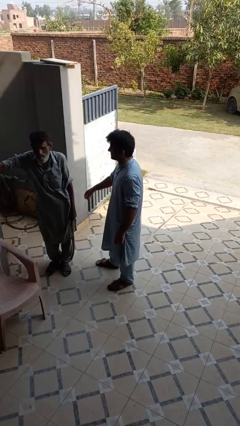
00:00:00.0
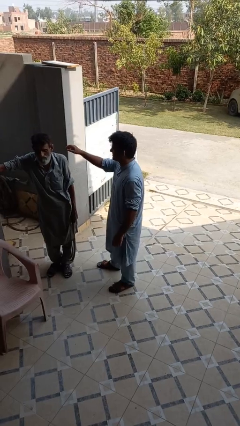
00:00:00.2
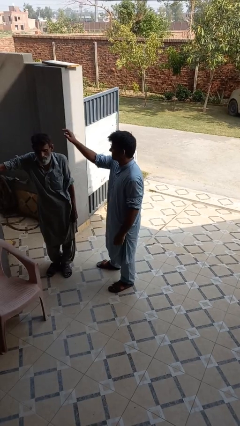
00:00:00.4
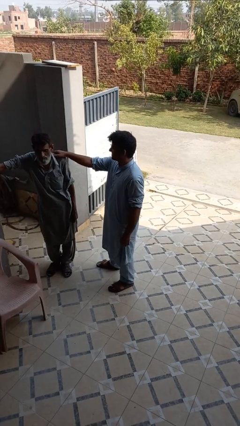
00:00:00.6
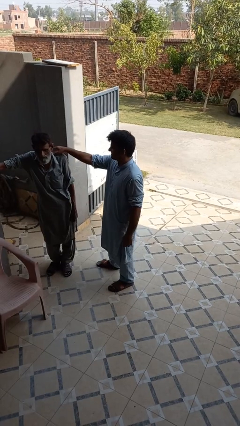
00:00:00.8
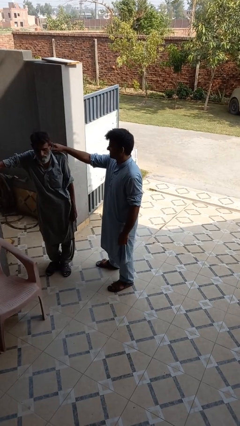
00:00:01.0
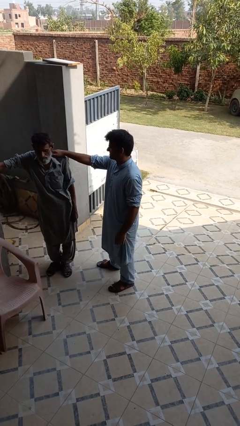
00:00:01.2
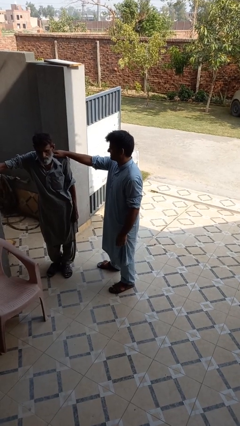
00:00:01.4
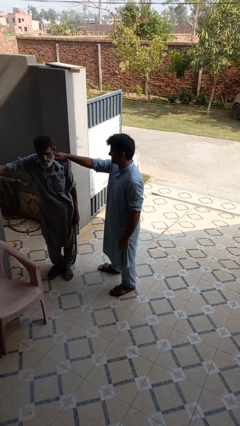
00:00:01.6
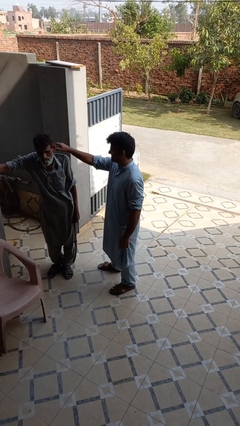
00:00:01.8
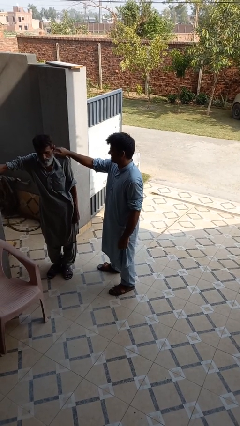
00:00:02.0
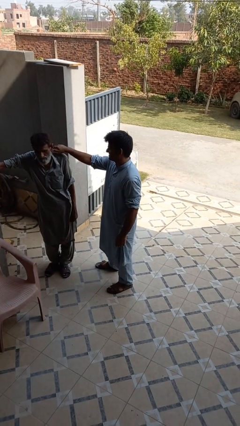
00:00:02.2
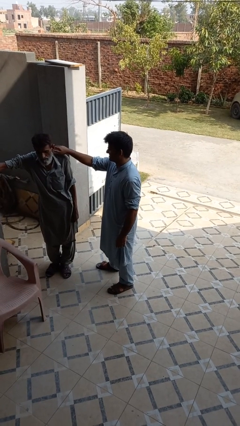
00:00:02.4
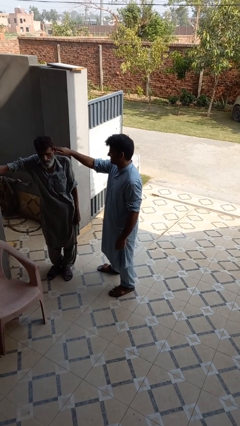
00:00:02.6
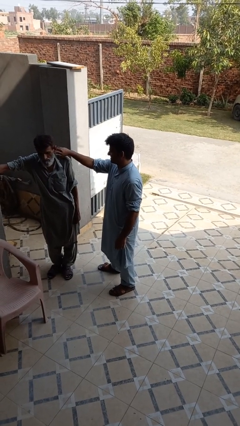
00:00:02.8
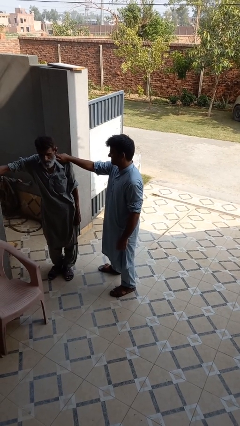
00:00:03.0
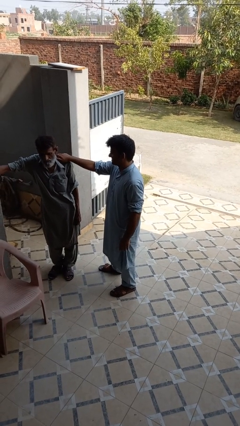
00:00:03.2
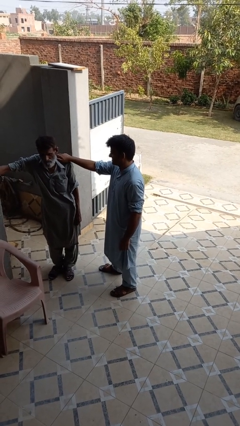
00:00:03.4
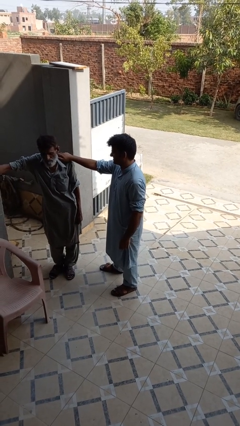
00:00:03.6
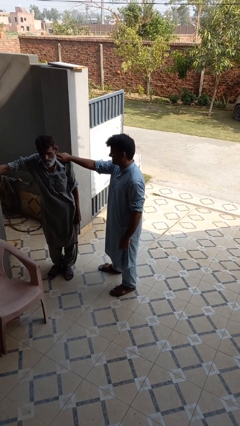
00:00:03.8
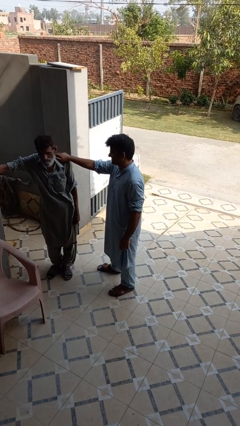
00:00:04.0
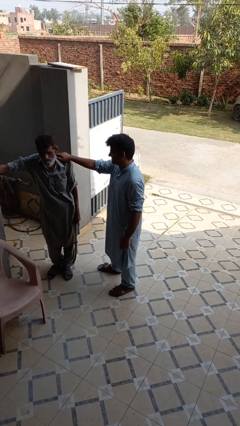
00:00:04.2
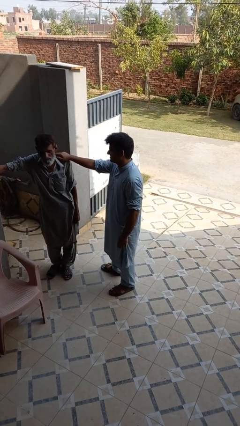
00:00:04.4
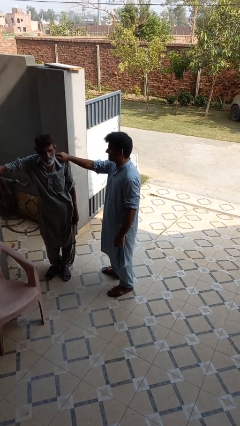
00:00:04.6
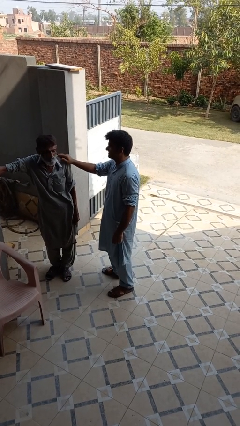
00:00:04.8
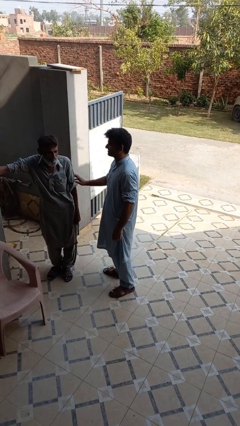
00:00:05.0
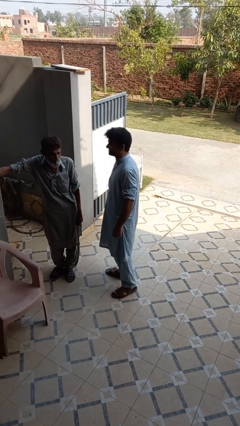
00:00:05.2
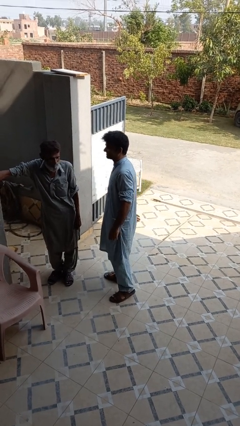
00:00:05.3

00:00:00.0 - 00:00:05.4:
person pounds shoulders of person

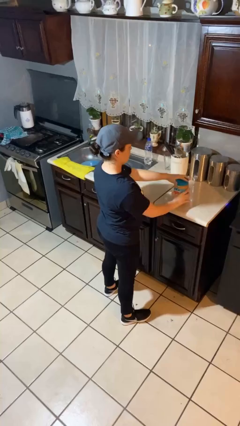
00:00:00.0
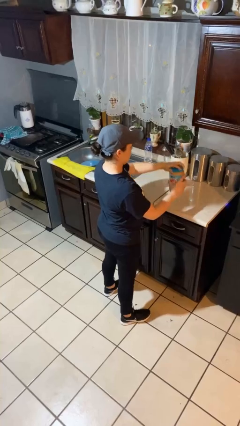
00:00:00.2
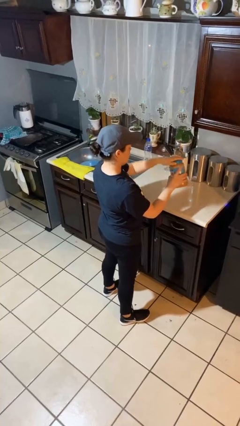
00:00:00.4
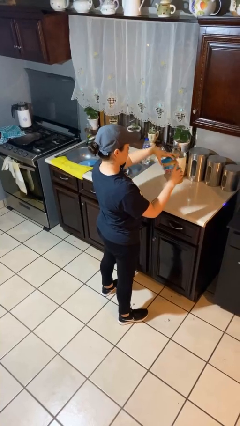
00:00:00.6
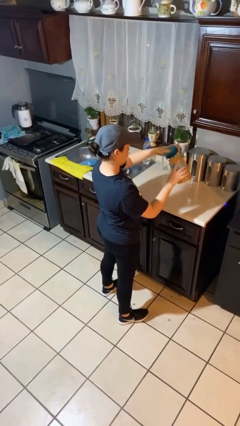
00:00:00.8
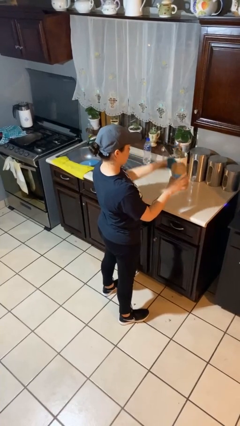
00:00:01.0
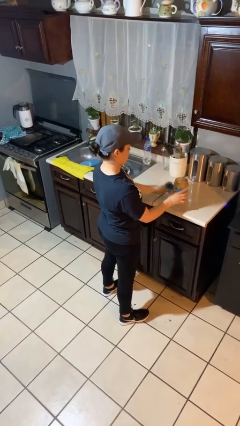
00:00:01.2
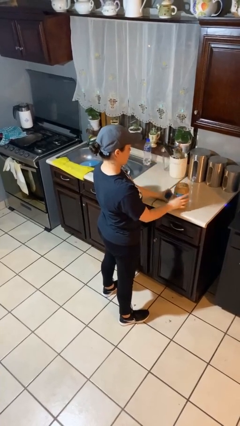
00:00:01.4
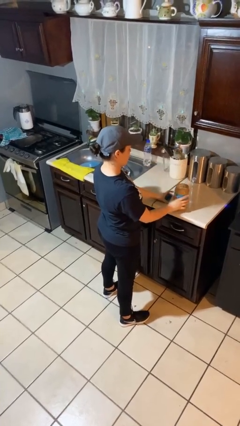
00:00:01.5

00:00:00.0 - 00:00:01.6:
person opens jar

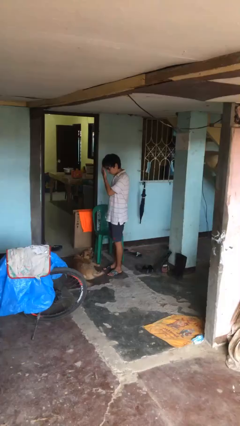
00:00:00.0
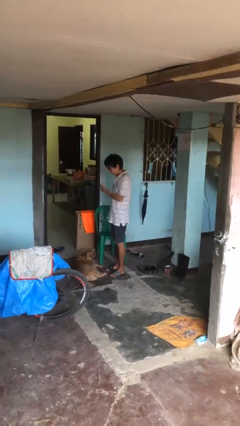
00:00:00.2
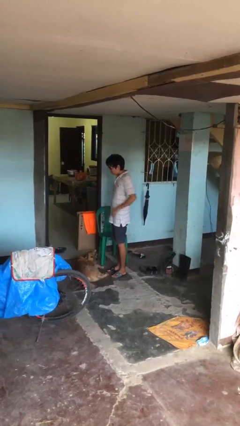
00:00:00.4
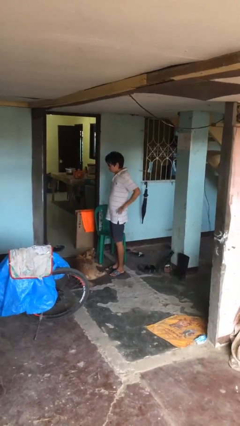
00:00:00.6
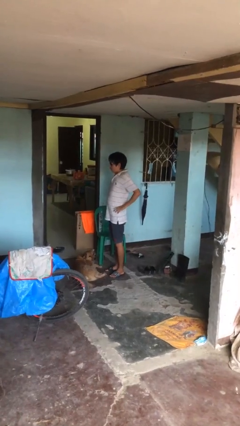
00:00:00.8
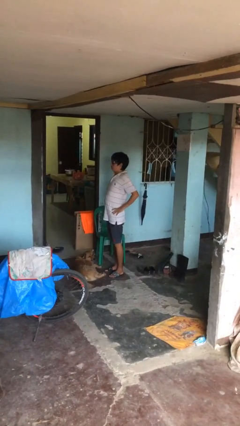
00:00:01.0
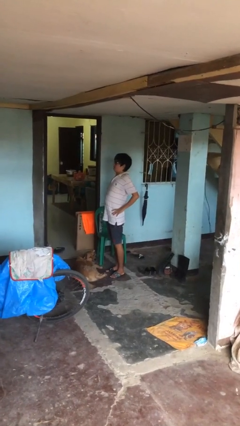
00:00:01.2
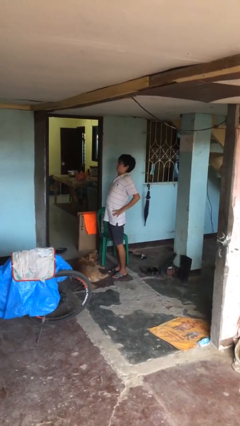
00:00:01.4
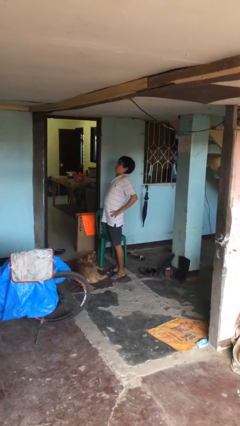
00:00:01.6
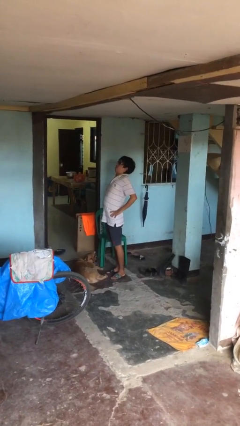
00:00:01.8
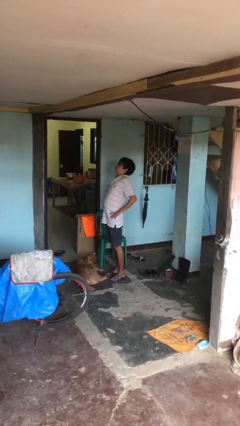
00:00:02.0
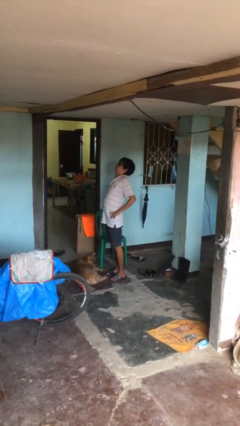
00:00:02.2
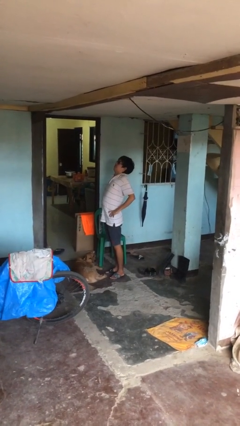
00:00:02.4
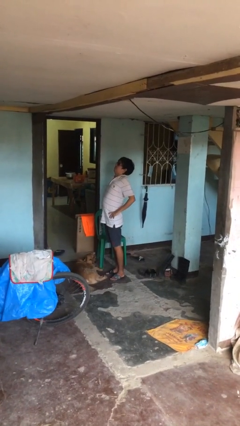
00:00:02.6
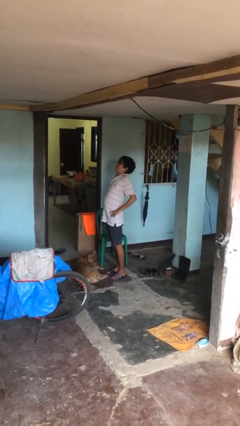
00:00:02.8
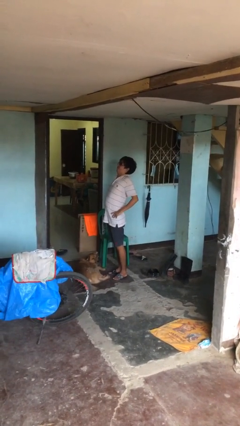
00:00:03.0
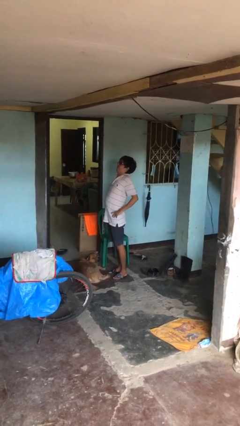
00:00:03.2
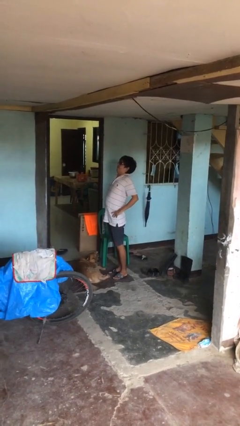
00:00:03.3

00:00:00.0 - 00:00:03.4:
person stretches back

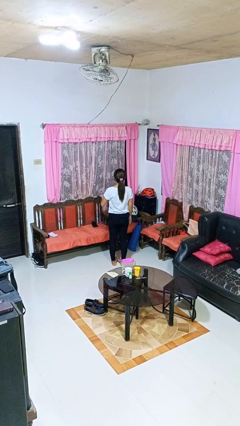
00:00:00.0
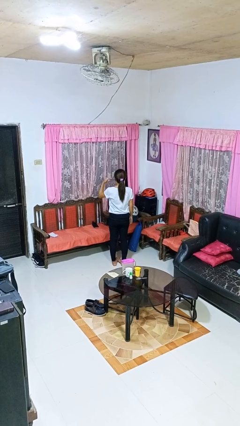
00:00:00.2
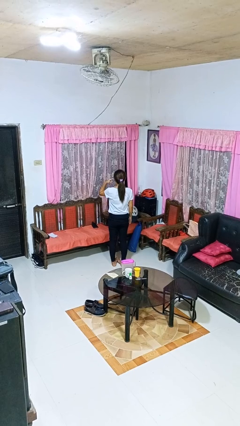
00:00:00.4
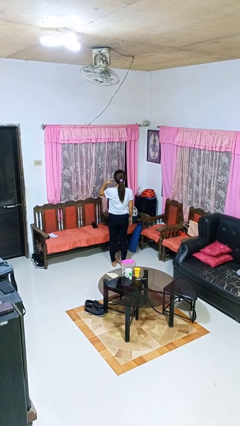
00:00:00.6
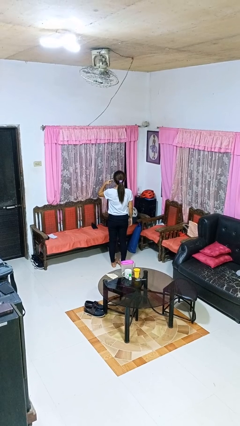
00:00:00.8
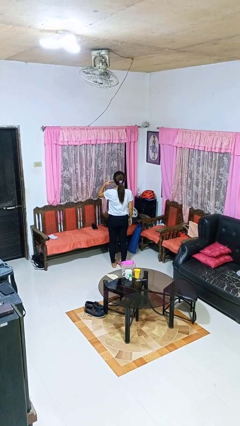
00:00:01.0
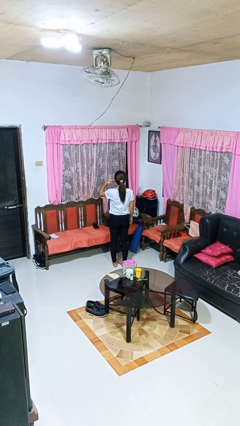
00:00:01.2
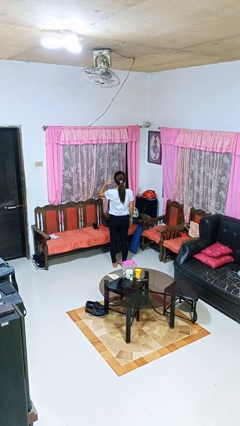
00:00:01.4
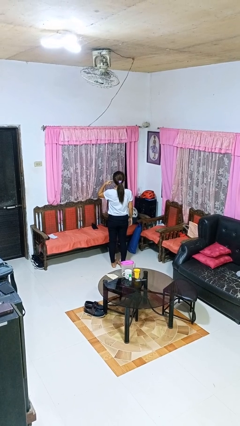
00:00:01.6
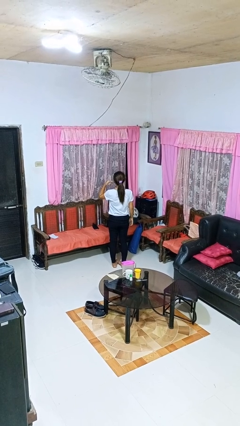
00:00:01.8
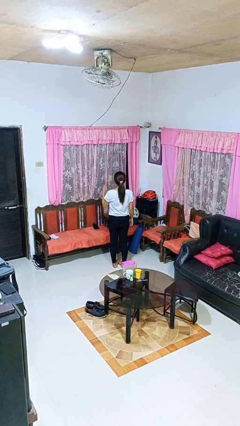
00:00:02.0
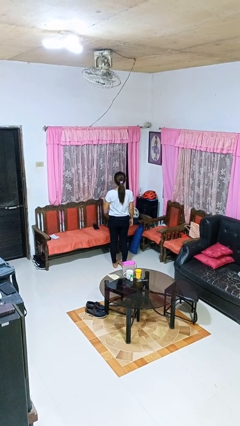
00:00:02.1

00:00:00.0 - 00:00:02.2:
person gestures listen closely

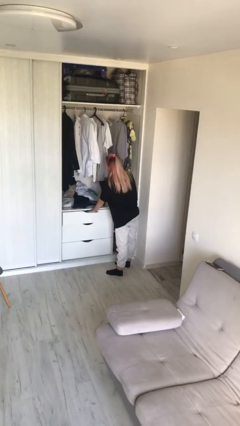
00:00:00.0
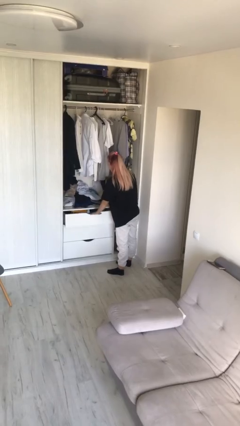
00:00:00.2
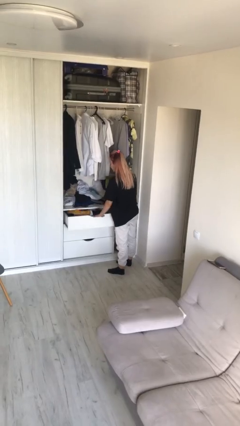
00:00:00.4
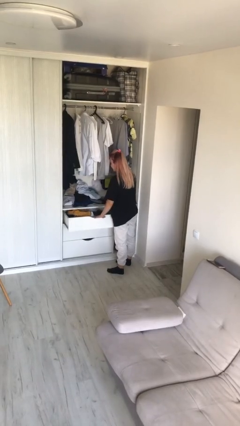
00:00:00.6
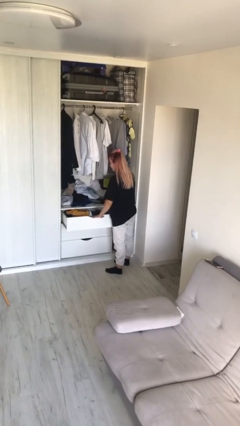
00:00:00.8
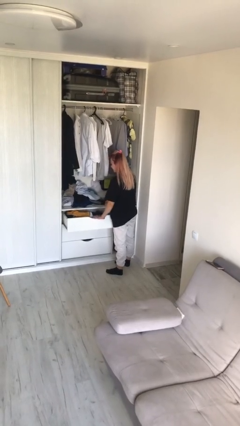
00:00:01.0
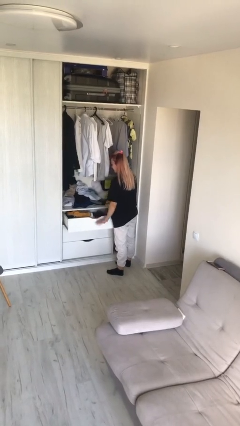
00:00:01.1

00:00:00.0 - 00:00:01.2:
person opens dresser drawer

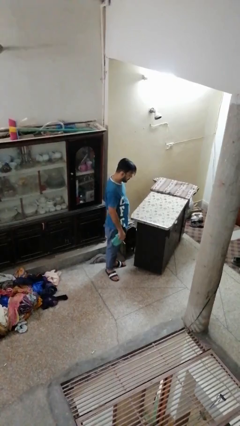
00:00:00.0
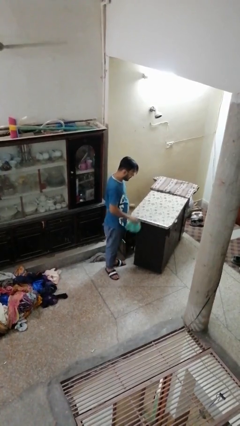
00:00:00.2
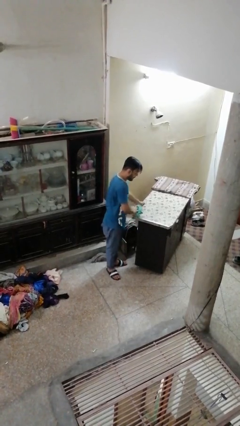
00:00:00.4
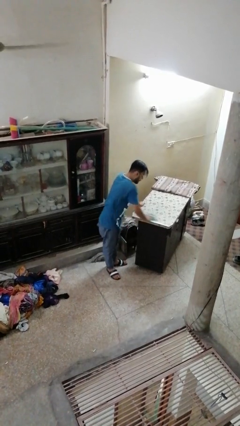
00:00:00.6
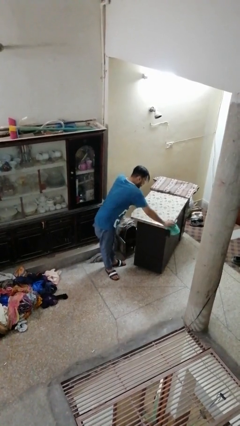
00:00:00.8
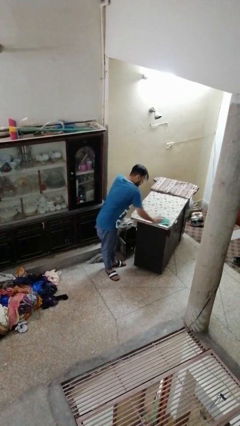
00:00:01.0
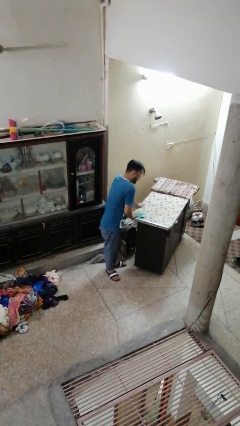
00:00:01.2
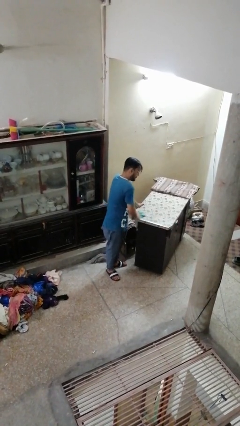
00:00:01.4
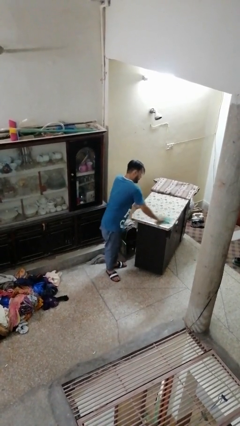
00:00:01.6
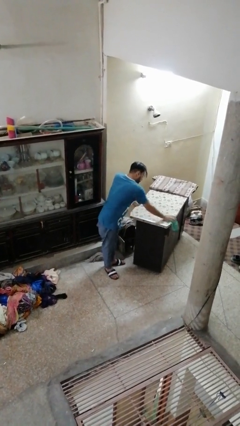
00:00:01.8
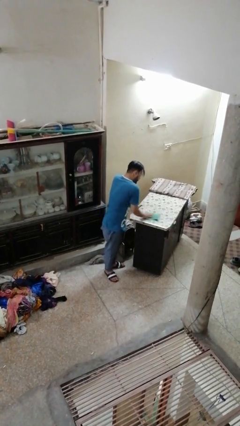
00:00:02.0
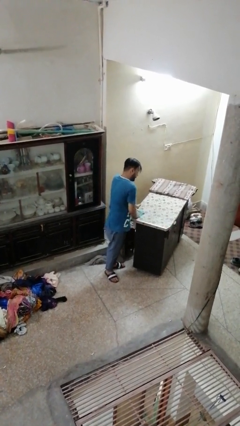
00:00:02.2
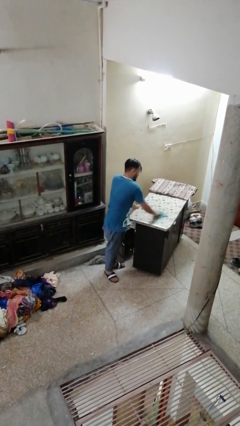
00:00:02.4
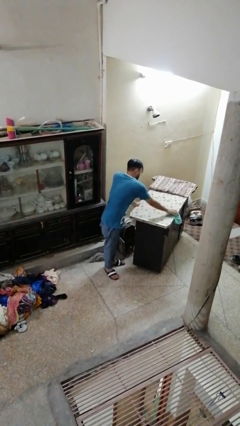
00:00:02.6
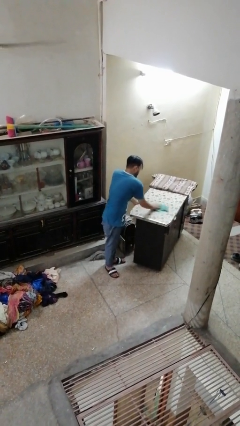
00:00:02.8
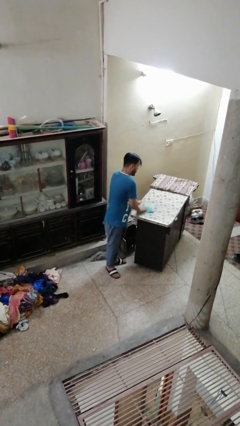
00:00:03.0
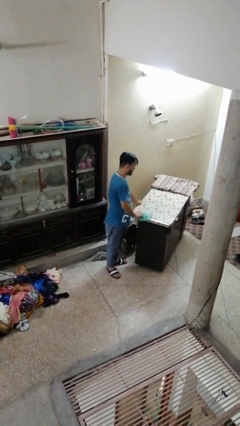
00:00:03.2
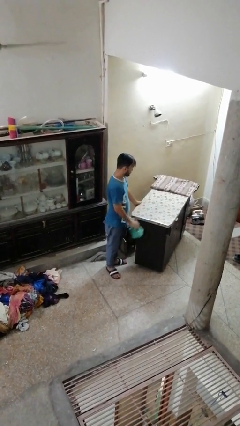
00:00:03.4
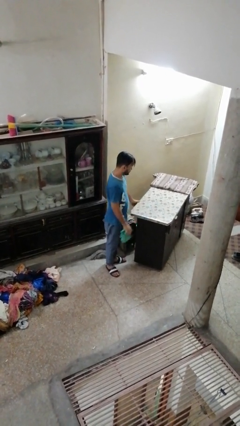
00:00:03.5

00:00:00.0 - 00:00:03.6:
person cleans table with rag
